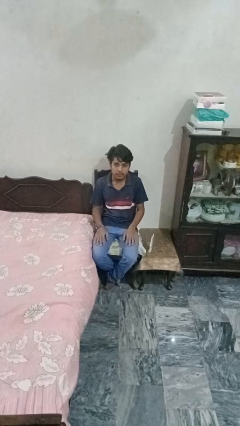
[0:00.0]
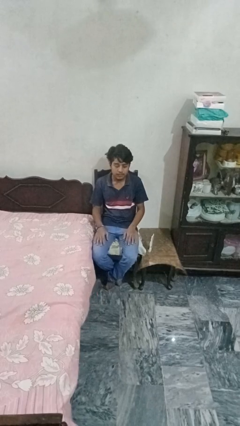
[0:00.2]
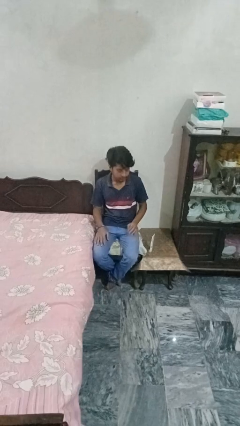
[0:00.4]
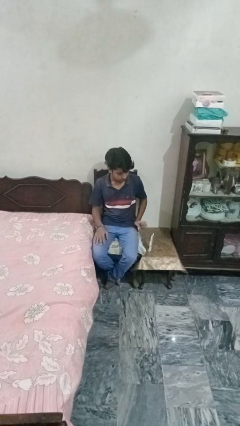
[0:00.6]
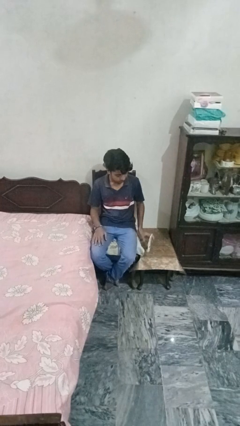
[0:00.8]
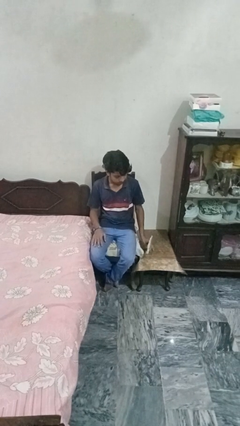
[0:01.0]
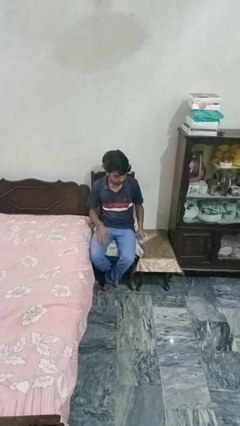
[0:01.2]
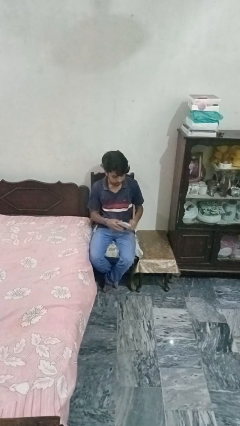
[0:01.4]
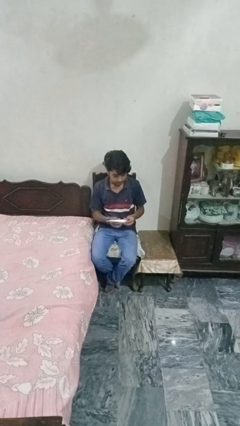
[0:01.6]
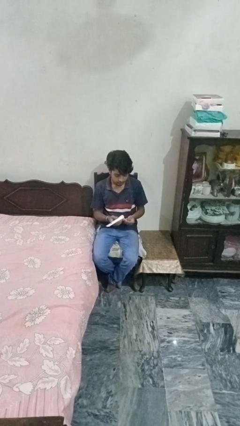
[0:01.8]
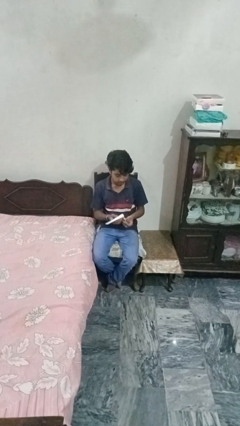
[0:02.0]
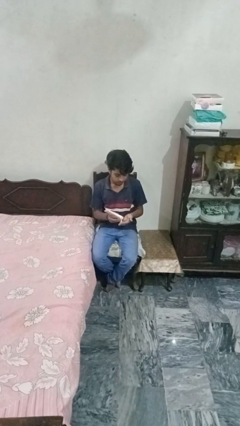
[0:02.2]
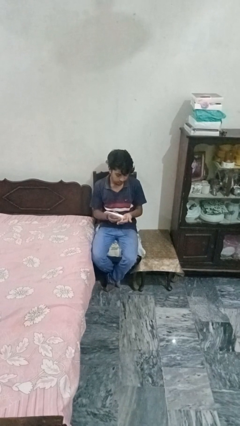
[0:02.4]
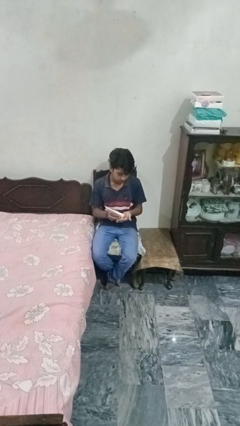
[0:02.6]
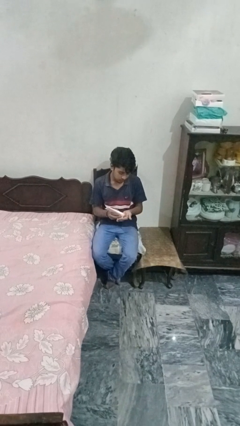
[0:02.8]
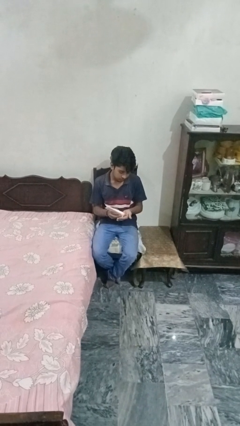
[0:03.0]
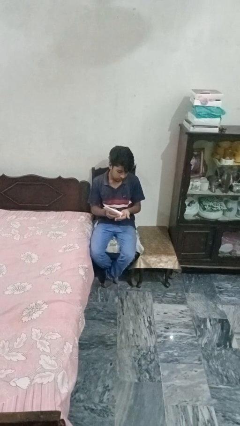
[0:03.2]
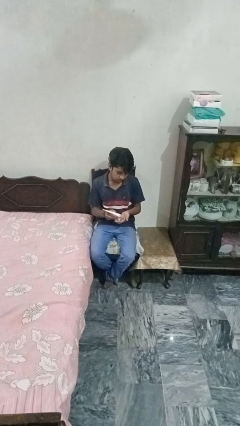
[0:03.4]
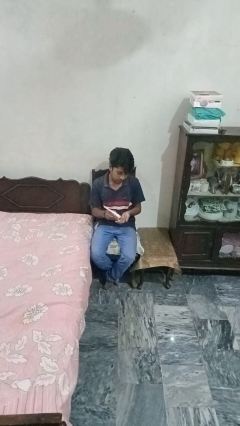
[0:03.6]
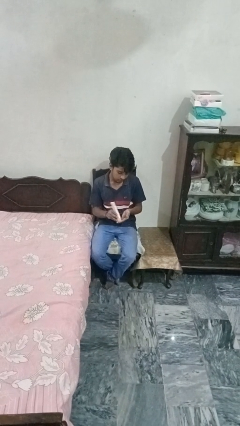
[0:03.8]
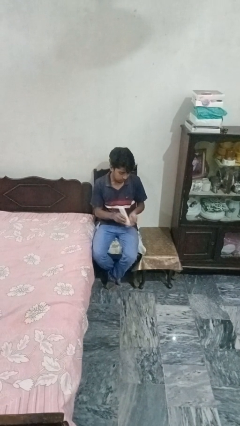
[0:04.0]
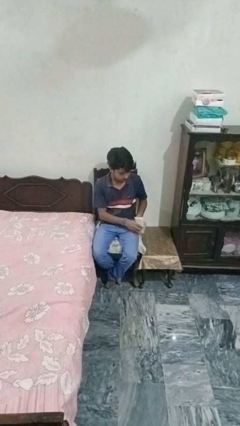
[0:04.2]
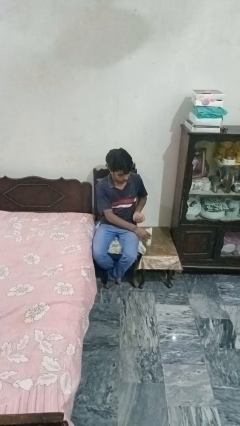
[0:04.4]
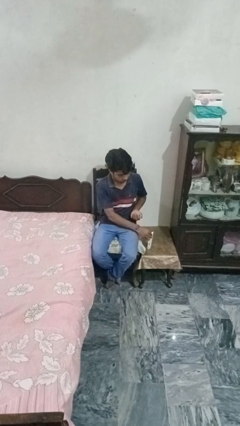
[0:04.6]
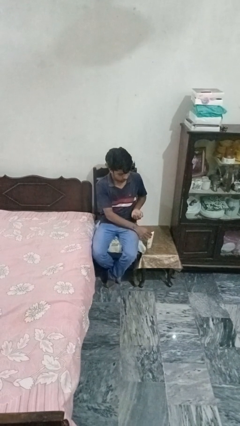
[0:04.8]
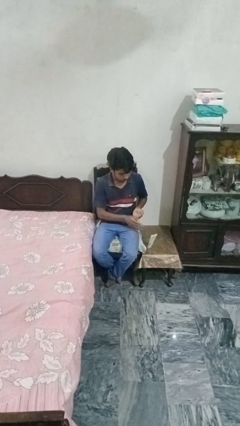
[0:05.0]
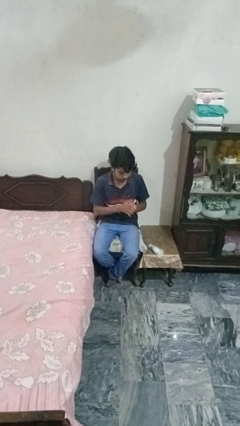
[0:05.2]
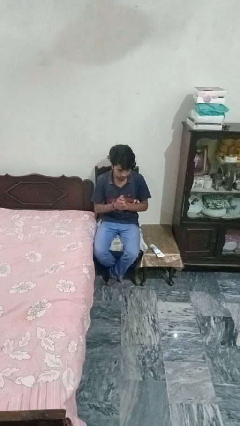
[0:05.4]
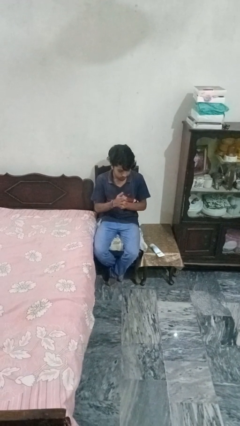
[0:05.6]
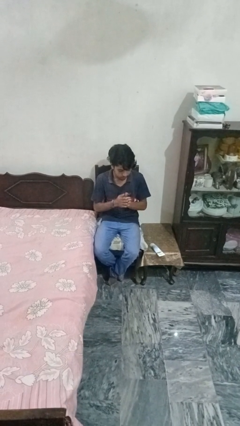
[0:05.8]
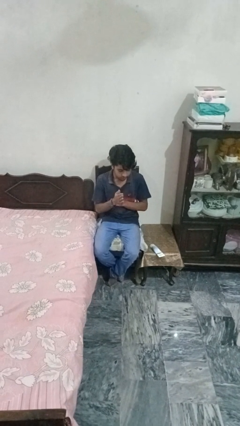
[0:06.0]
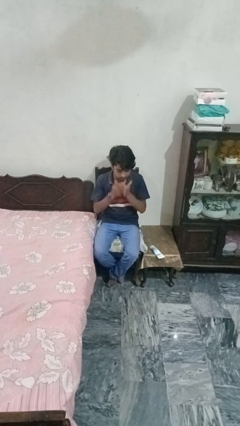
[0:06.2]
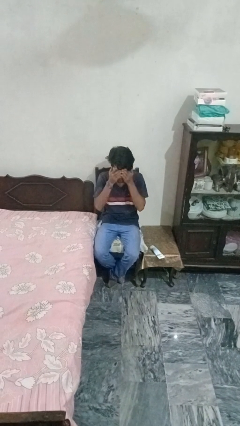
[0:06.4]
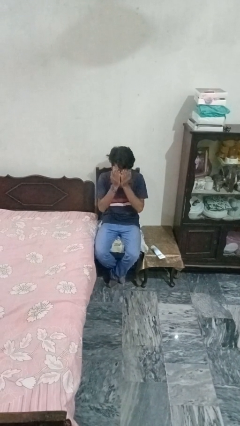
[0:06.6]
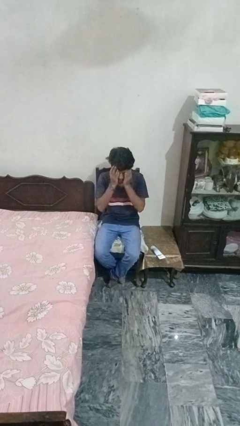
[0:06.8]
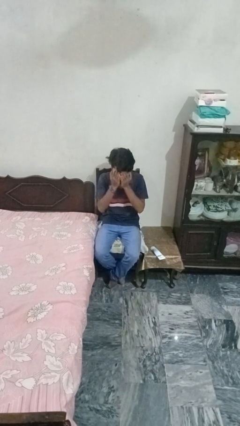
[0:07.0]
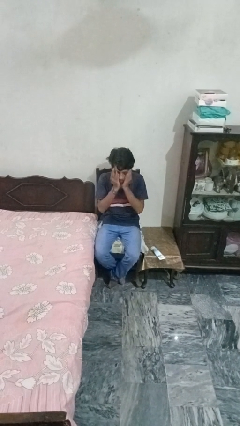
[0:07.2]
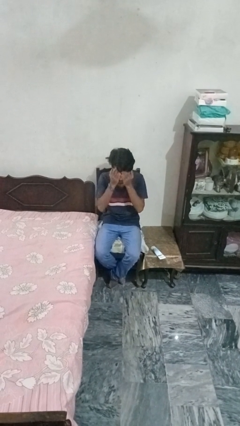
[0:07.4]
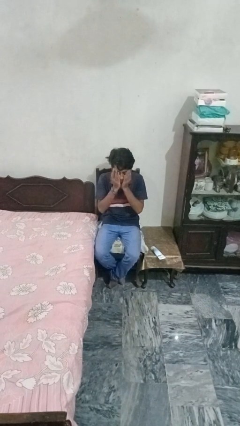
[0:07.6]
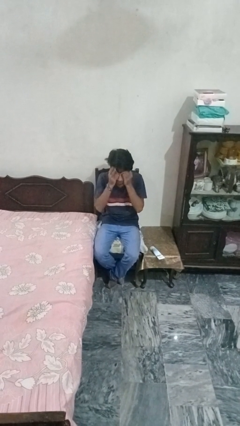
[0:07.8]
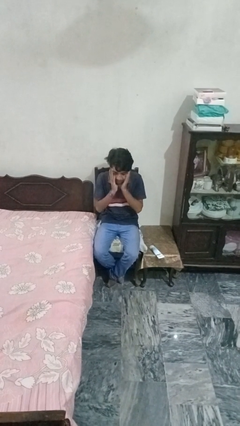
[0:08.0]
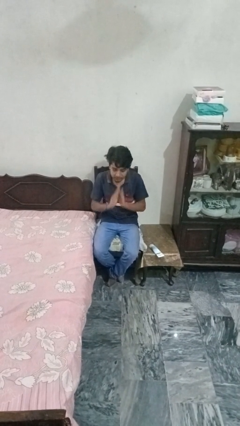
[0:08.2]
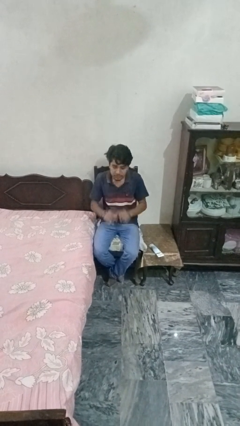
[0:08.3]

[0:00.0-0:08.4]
person applies facial moisturizer

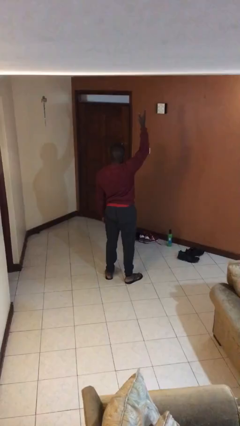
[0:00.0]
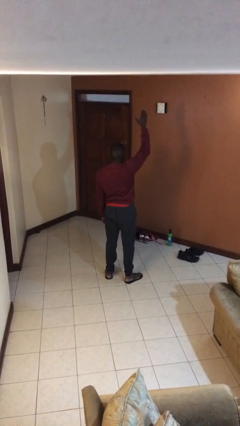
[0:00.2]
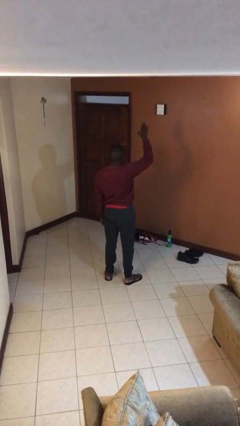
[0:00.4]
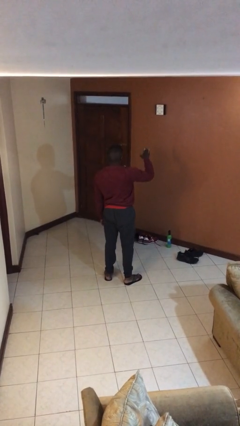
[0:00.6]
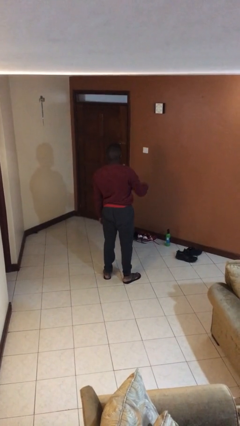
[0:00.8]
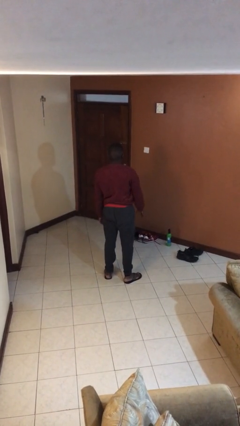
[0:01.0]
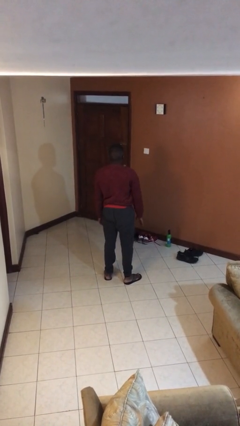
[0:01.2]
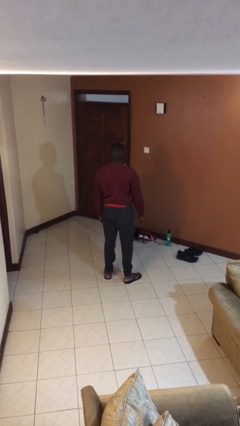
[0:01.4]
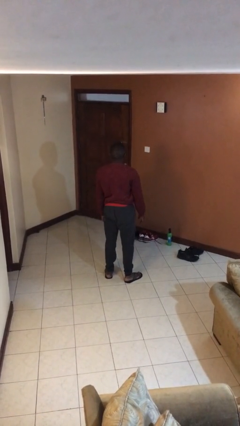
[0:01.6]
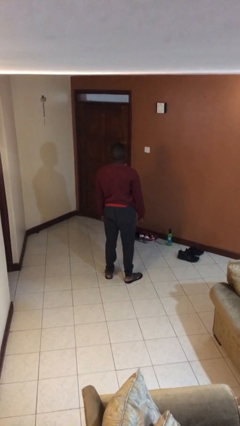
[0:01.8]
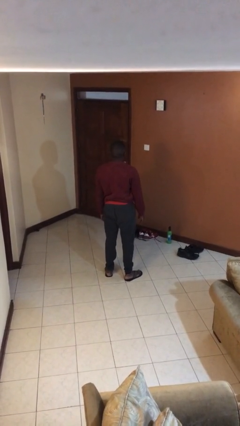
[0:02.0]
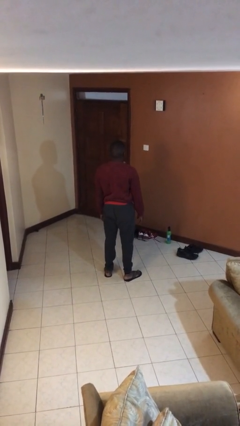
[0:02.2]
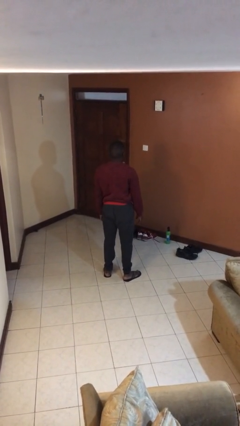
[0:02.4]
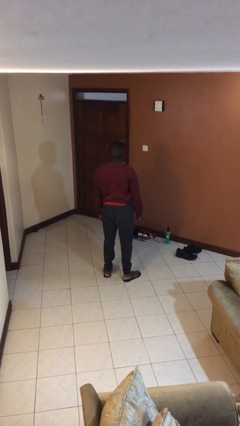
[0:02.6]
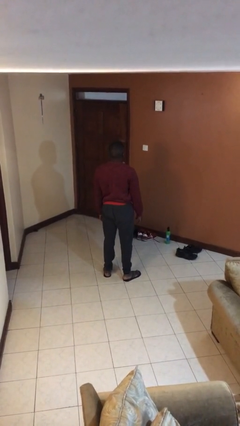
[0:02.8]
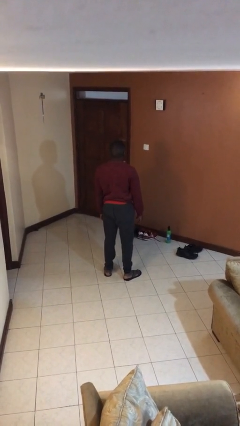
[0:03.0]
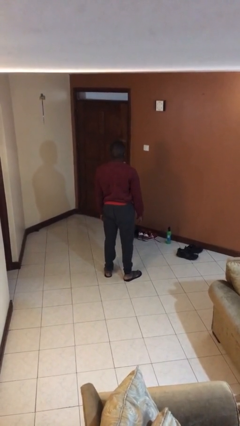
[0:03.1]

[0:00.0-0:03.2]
person gestures swipe up

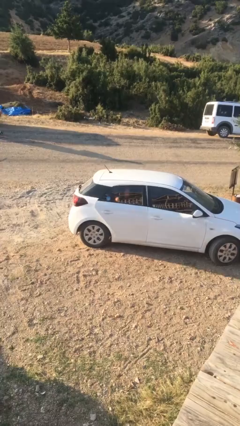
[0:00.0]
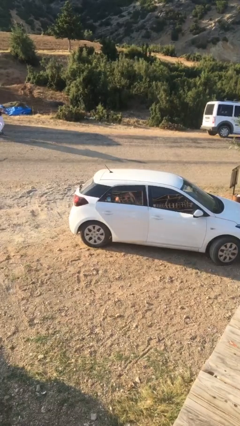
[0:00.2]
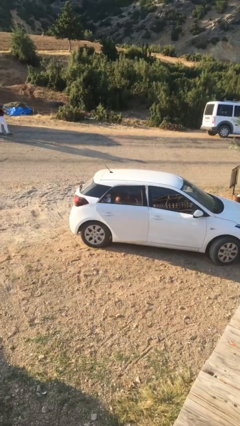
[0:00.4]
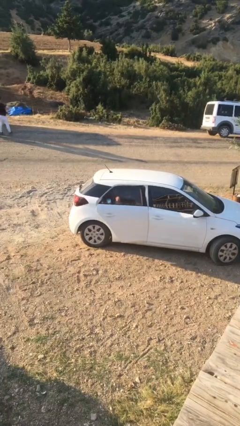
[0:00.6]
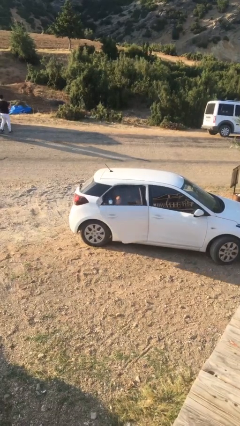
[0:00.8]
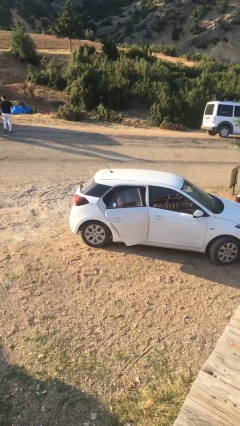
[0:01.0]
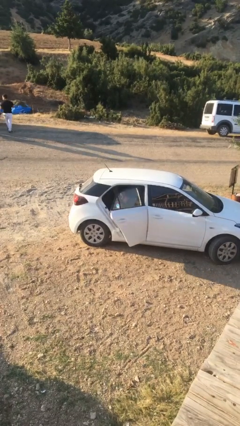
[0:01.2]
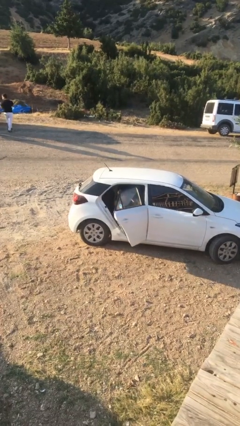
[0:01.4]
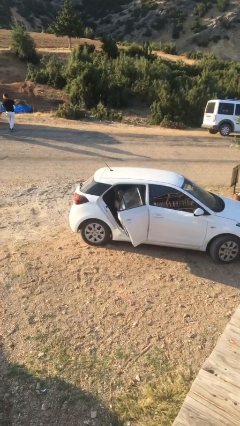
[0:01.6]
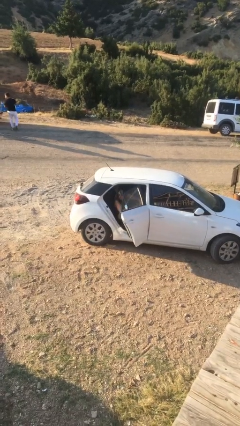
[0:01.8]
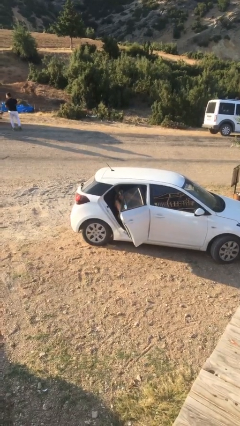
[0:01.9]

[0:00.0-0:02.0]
person opens car door

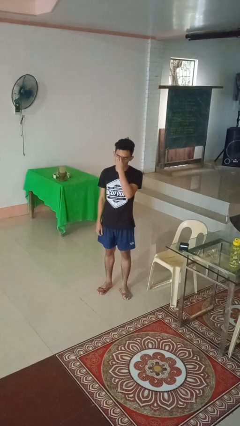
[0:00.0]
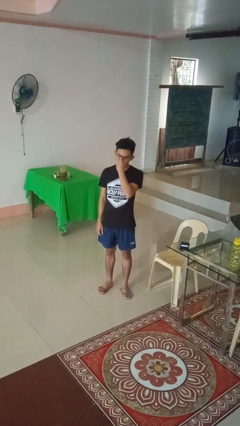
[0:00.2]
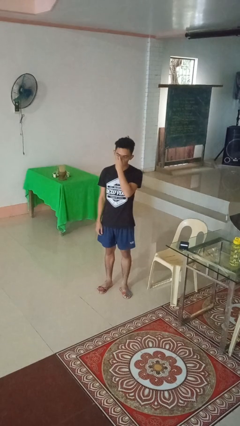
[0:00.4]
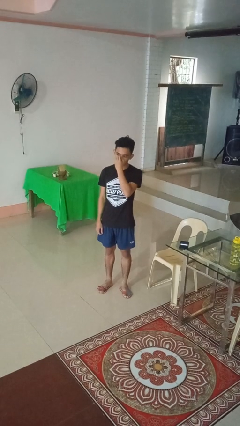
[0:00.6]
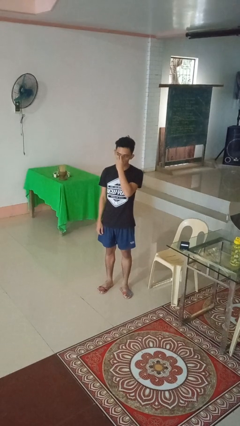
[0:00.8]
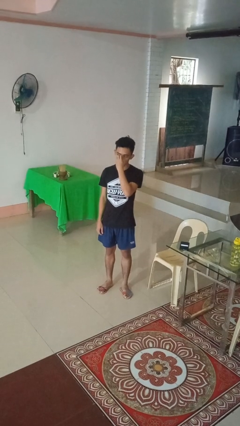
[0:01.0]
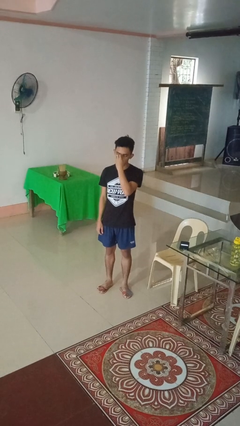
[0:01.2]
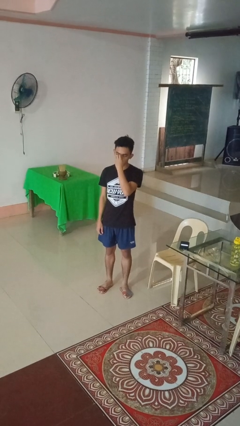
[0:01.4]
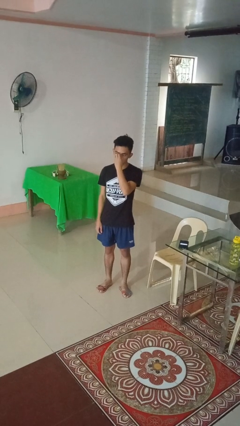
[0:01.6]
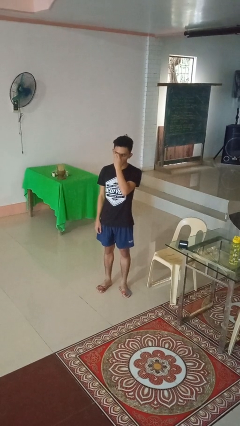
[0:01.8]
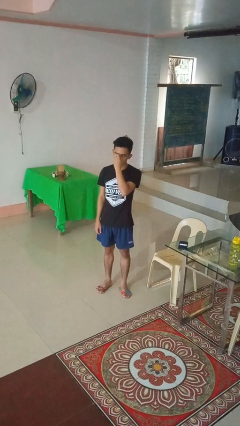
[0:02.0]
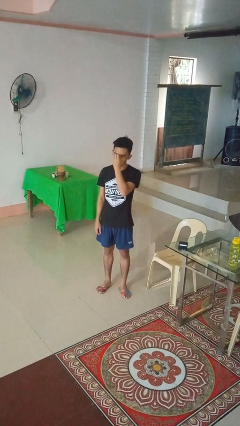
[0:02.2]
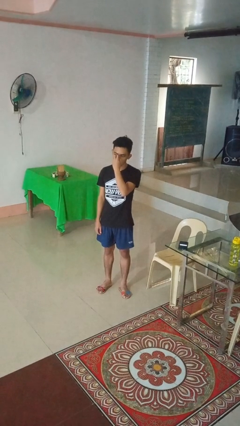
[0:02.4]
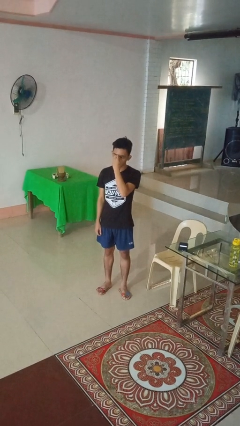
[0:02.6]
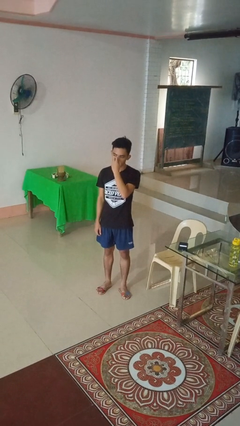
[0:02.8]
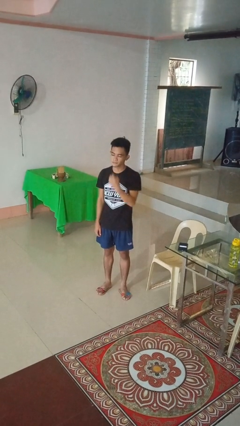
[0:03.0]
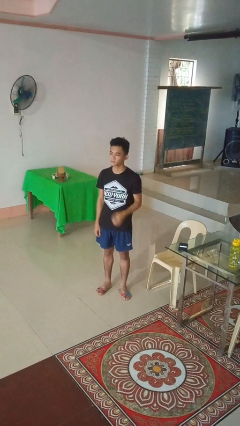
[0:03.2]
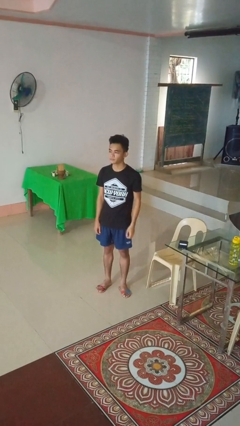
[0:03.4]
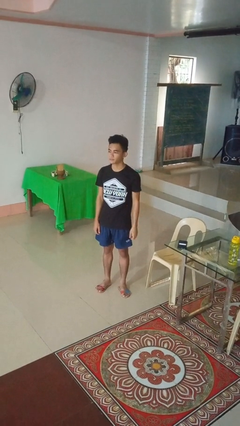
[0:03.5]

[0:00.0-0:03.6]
person scratches face

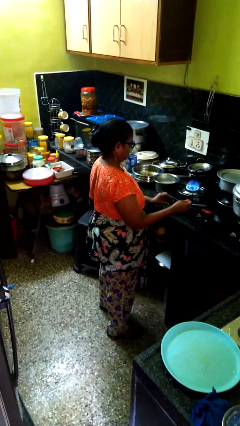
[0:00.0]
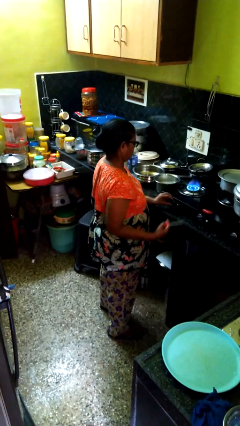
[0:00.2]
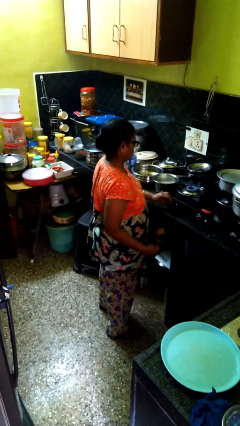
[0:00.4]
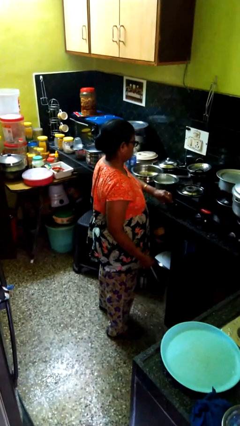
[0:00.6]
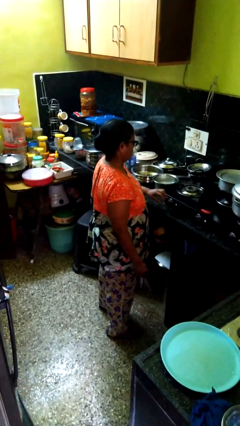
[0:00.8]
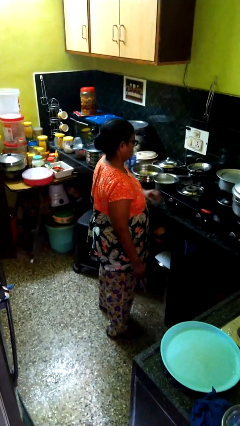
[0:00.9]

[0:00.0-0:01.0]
person turns off stovetop
